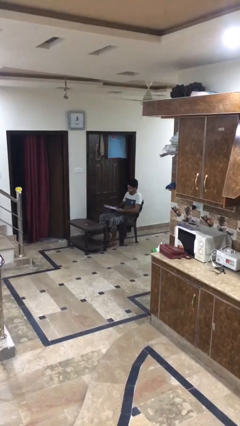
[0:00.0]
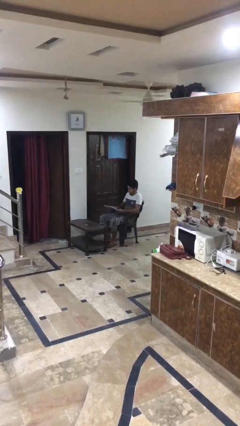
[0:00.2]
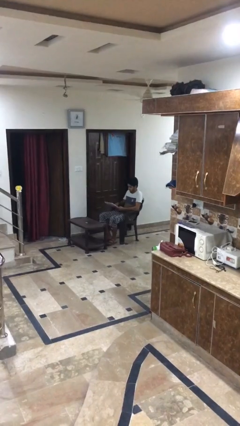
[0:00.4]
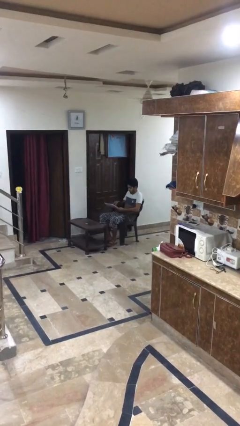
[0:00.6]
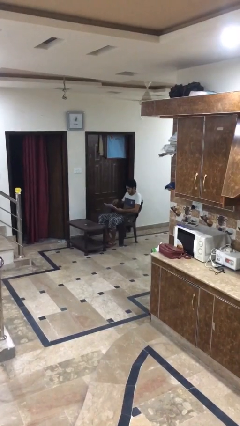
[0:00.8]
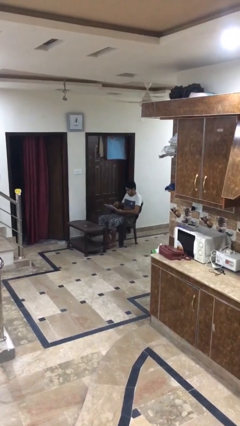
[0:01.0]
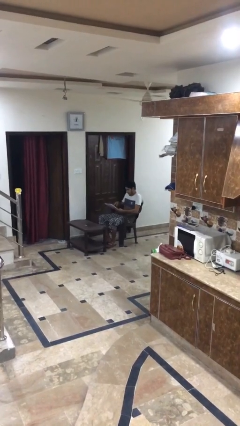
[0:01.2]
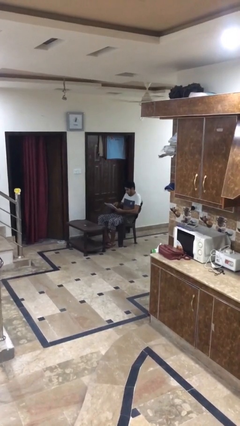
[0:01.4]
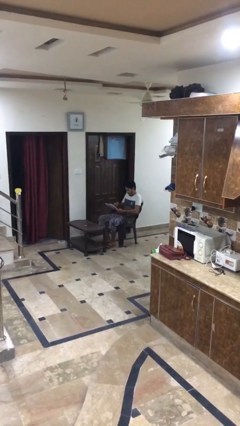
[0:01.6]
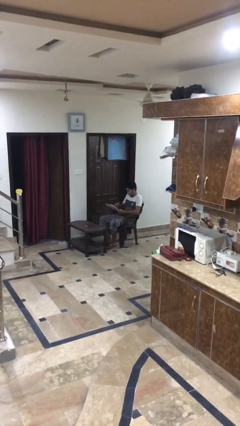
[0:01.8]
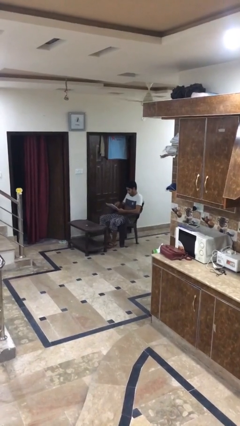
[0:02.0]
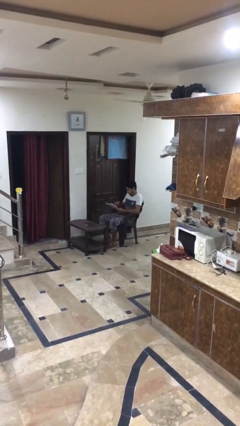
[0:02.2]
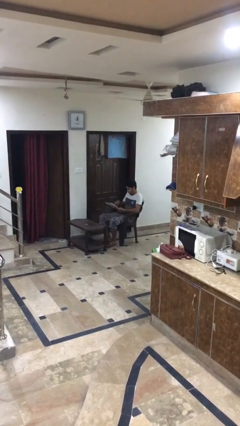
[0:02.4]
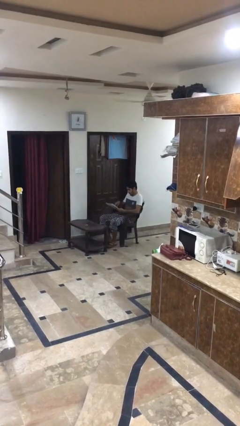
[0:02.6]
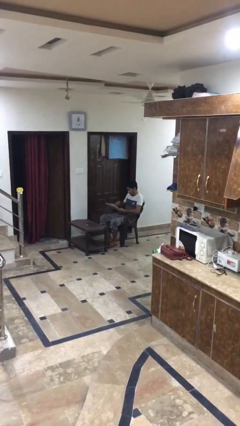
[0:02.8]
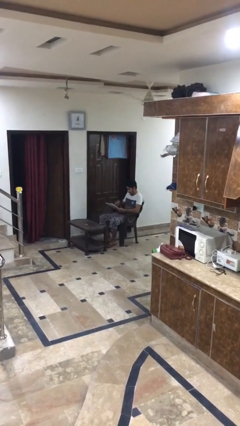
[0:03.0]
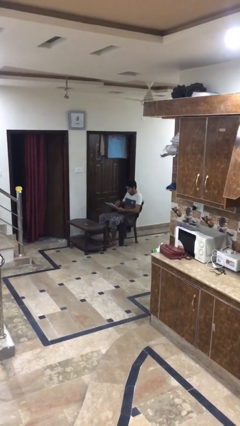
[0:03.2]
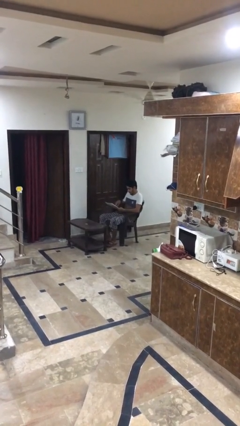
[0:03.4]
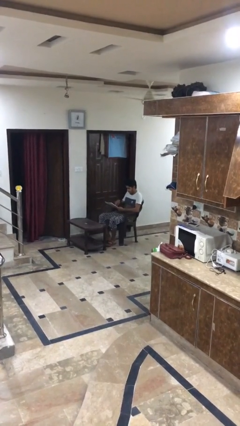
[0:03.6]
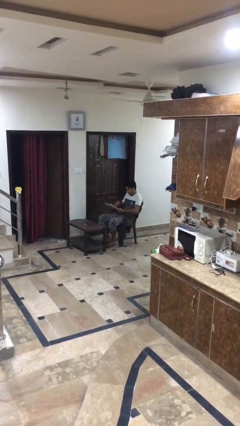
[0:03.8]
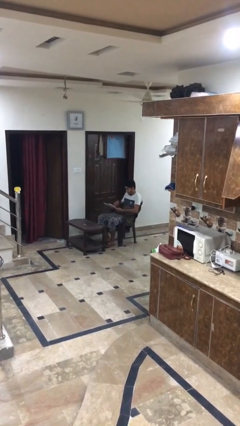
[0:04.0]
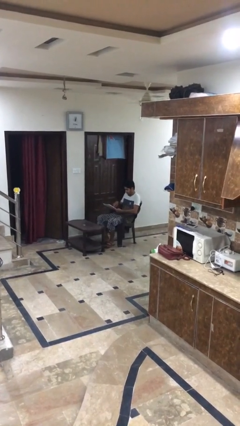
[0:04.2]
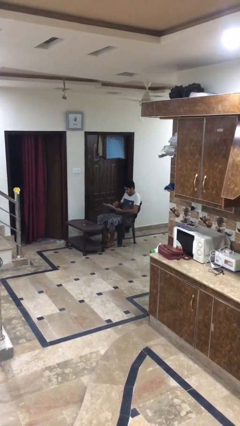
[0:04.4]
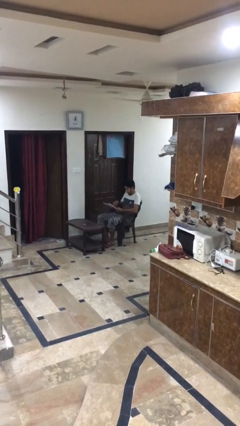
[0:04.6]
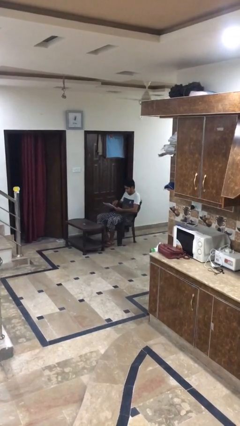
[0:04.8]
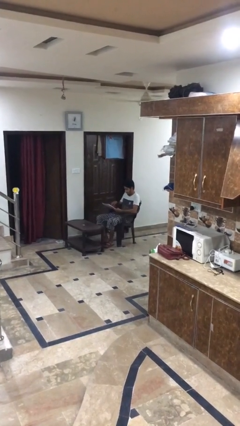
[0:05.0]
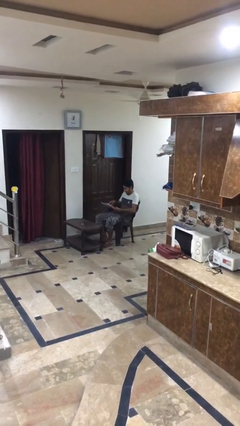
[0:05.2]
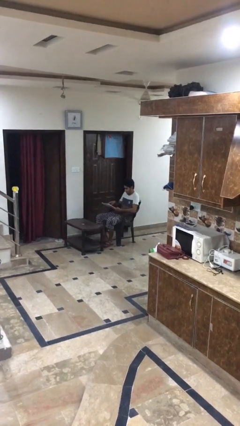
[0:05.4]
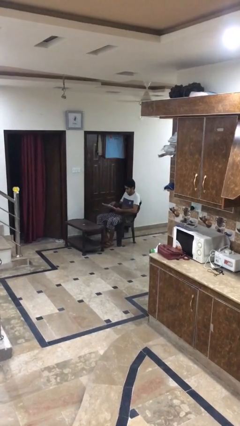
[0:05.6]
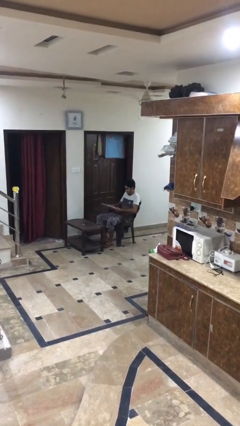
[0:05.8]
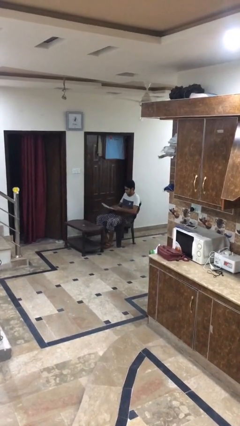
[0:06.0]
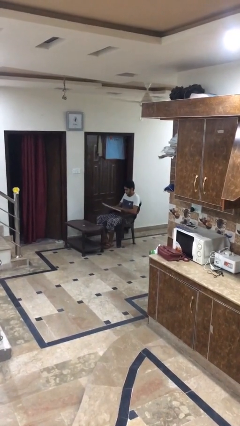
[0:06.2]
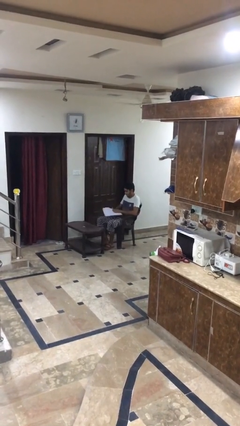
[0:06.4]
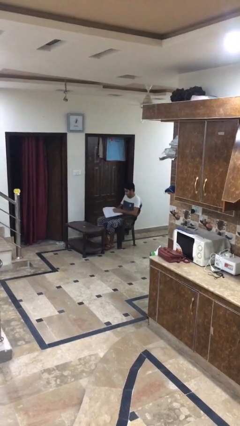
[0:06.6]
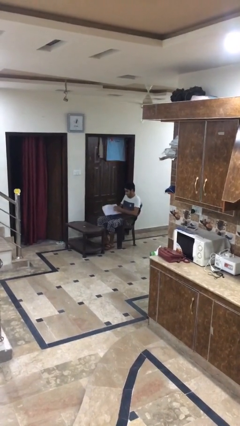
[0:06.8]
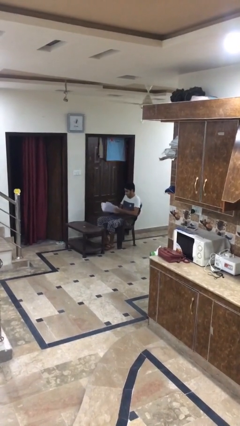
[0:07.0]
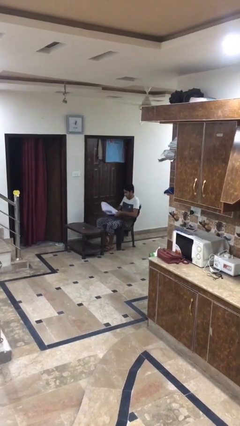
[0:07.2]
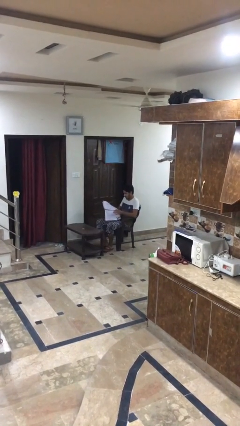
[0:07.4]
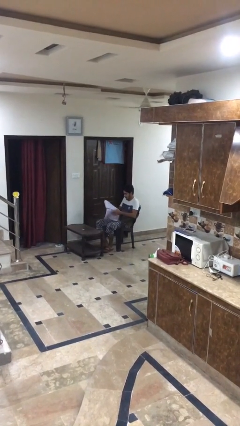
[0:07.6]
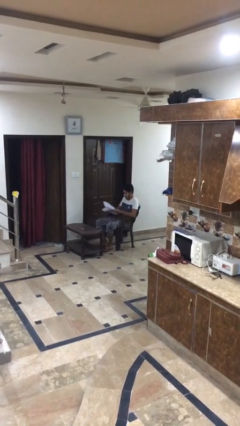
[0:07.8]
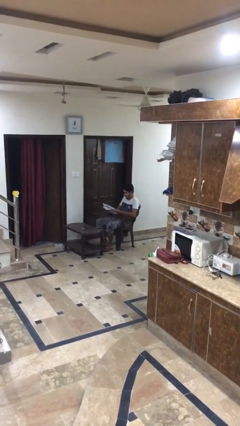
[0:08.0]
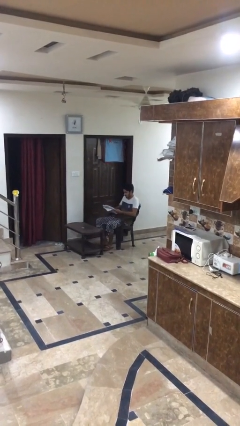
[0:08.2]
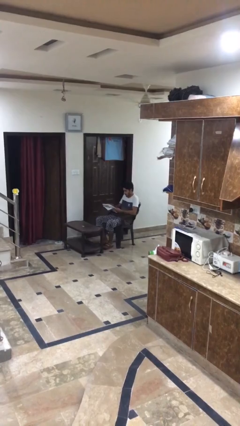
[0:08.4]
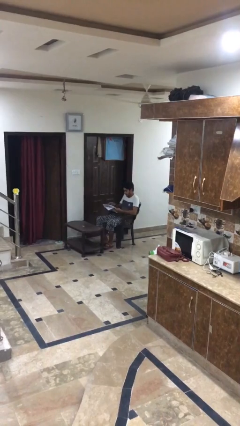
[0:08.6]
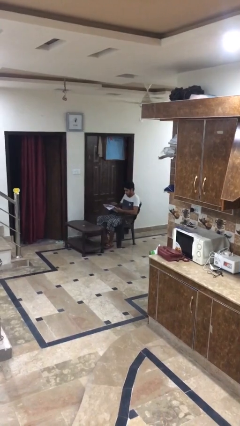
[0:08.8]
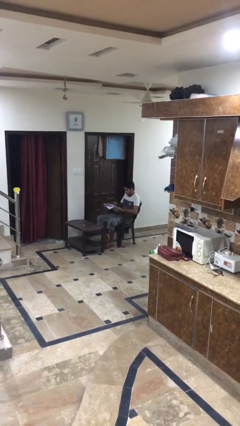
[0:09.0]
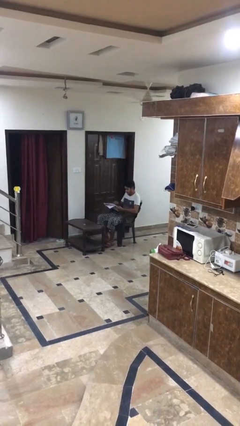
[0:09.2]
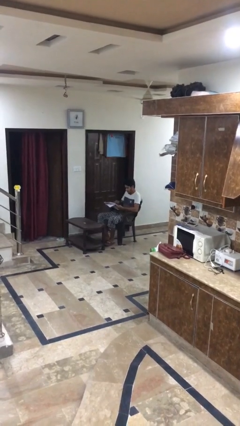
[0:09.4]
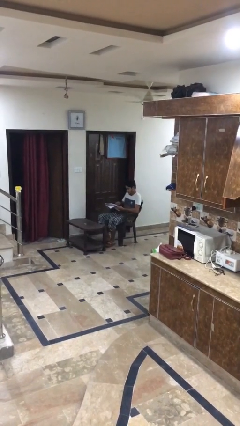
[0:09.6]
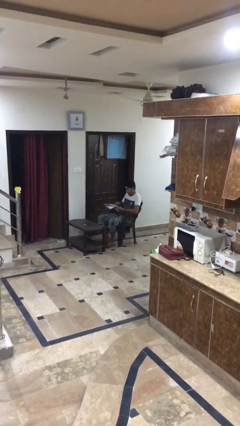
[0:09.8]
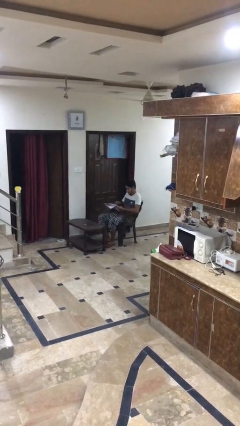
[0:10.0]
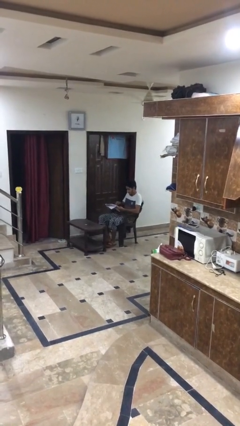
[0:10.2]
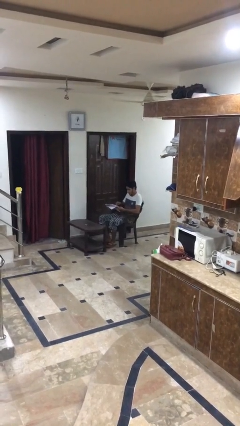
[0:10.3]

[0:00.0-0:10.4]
person reads document

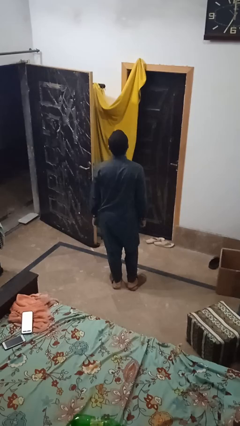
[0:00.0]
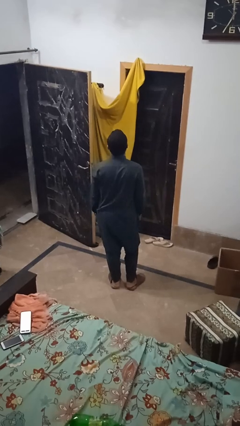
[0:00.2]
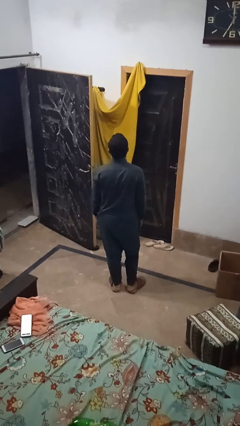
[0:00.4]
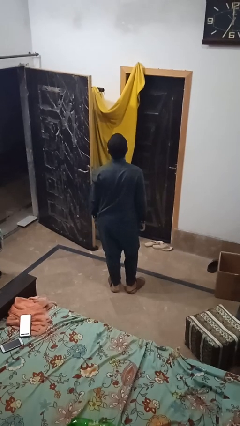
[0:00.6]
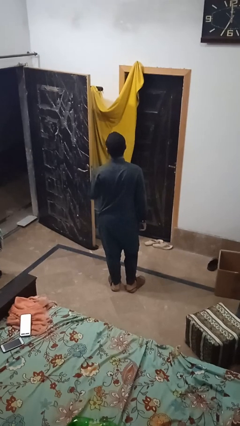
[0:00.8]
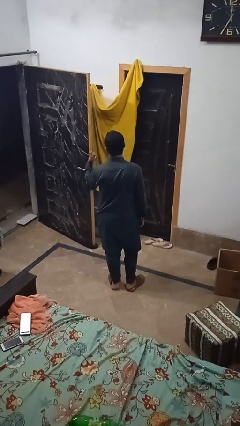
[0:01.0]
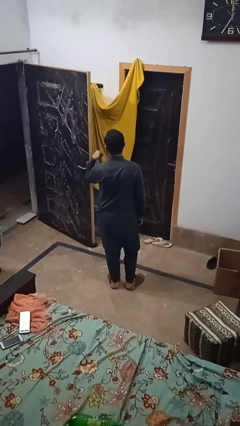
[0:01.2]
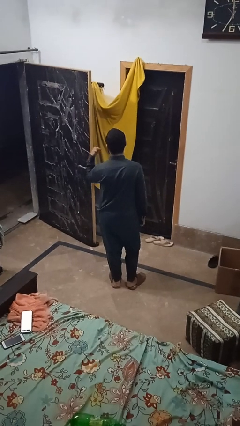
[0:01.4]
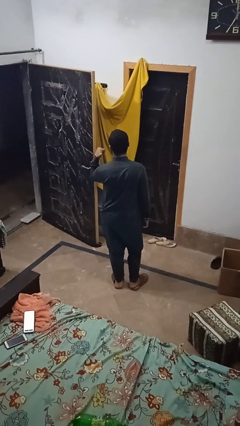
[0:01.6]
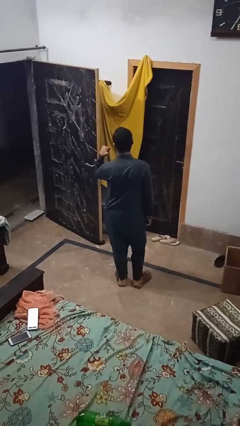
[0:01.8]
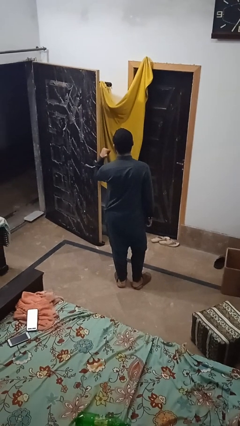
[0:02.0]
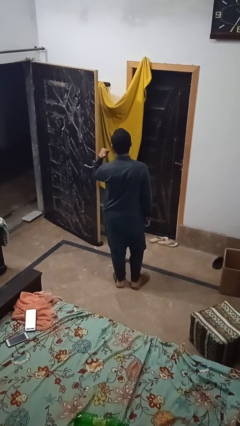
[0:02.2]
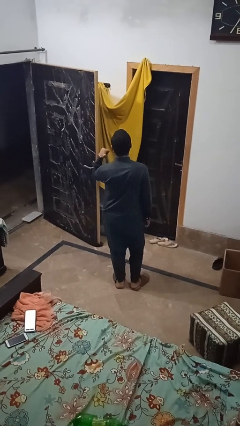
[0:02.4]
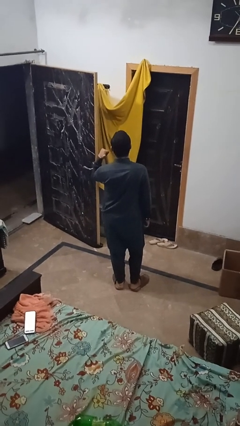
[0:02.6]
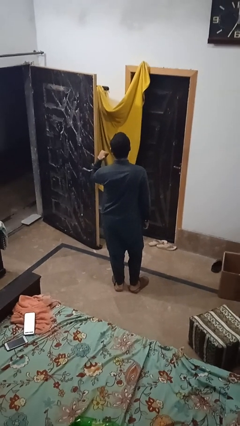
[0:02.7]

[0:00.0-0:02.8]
person gestures behind me

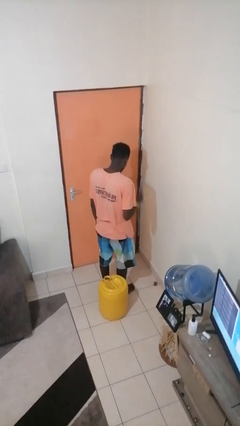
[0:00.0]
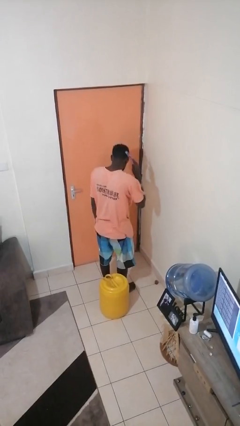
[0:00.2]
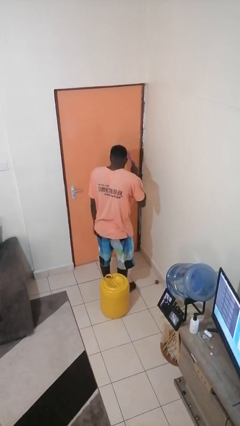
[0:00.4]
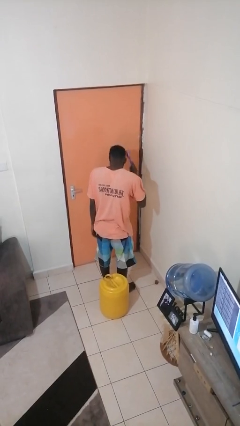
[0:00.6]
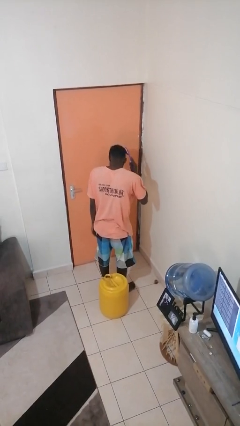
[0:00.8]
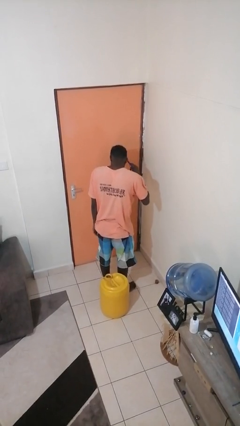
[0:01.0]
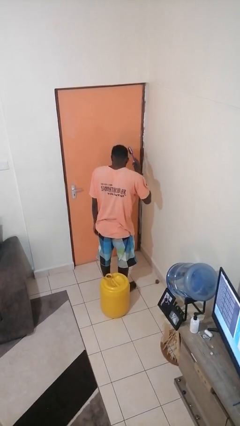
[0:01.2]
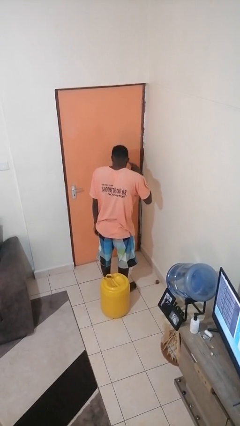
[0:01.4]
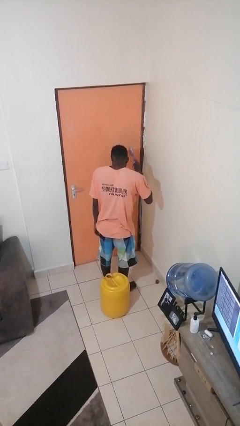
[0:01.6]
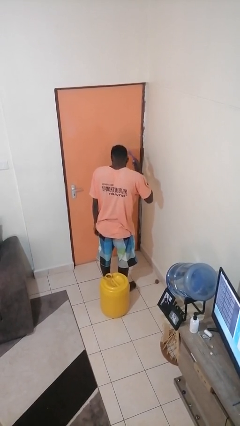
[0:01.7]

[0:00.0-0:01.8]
person brushes hair

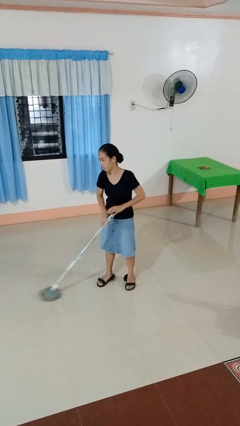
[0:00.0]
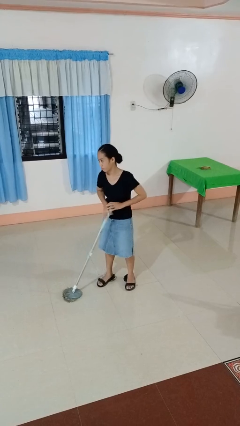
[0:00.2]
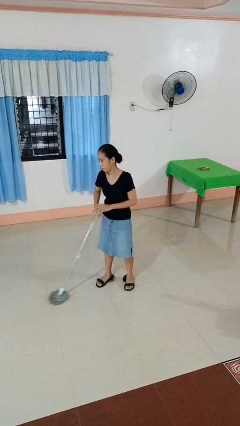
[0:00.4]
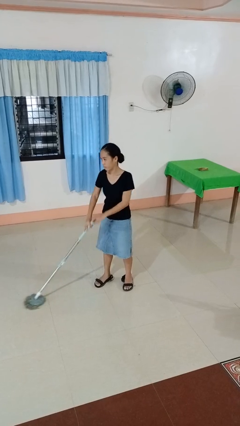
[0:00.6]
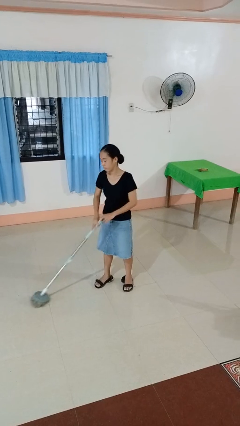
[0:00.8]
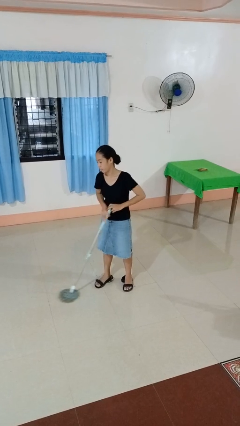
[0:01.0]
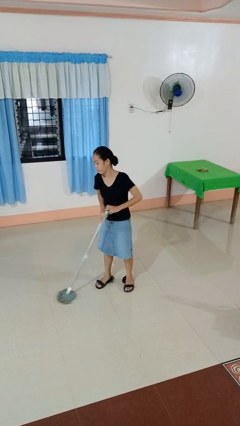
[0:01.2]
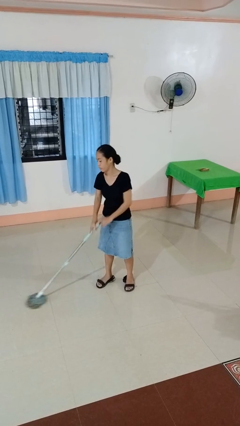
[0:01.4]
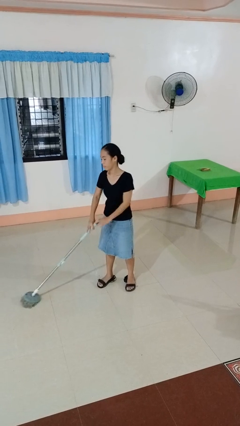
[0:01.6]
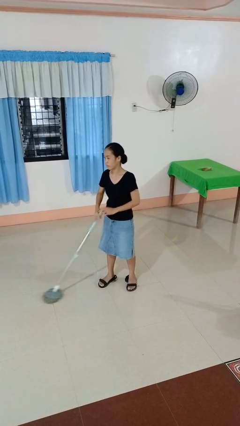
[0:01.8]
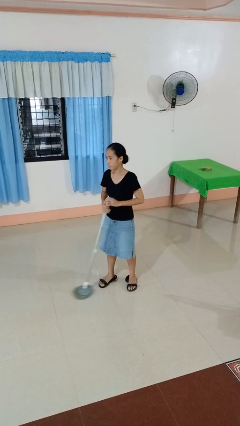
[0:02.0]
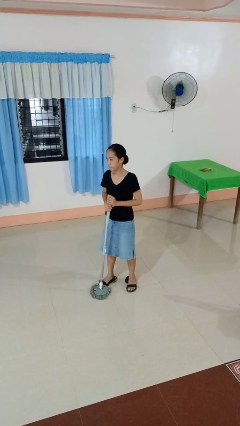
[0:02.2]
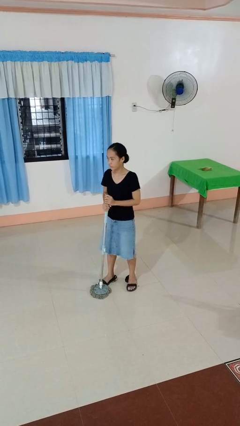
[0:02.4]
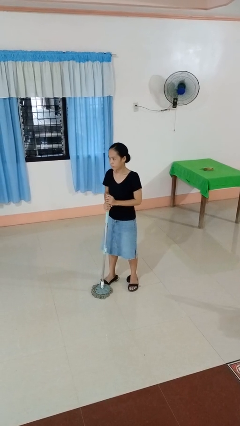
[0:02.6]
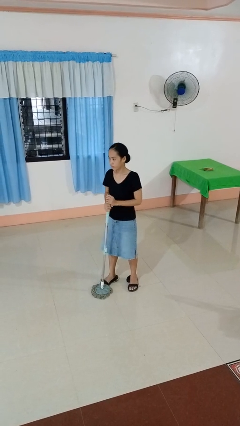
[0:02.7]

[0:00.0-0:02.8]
person mops
